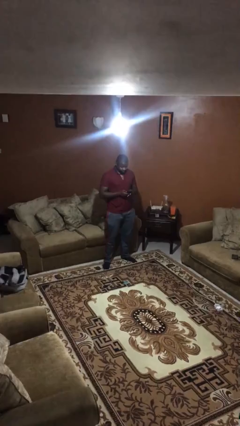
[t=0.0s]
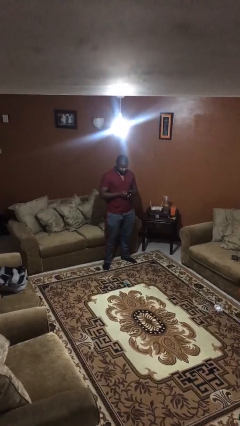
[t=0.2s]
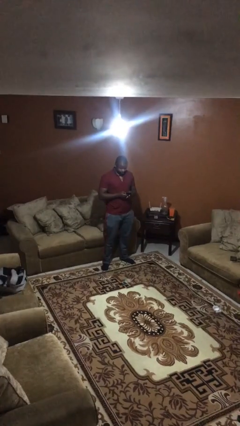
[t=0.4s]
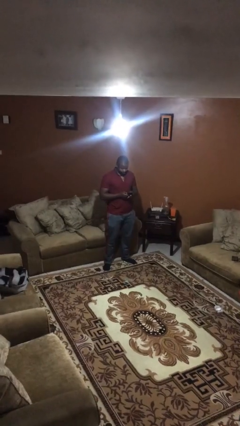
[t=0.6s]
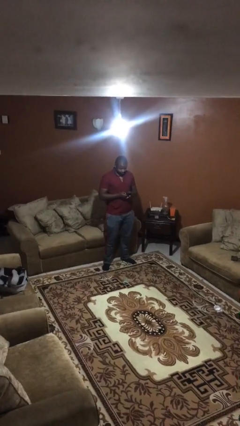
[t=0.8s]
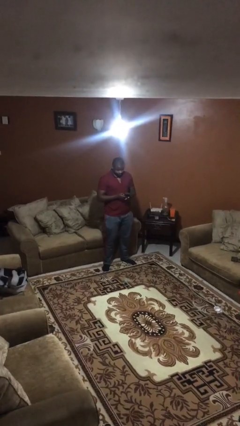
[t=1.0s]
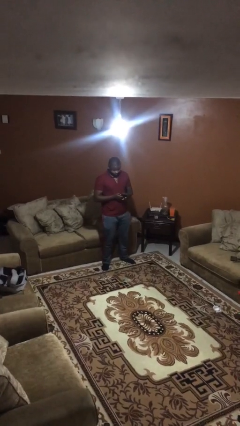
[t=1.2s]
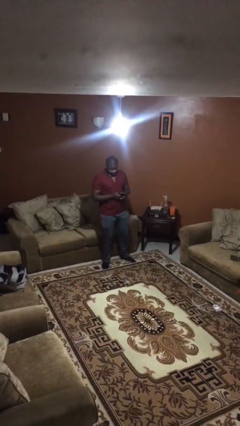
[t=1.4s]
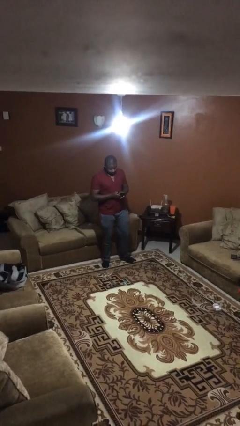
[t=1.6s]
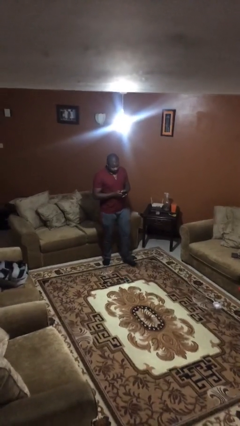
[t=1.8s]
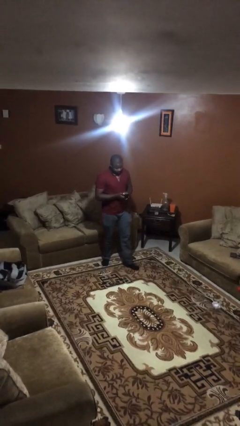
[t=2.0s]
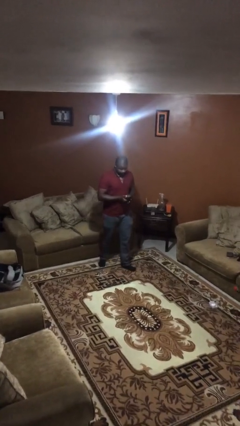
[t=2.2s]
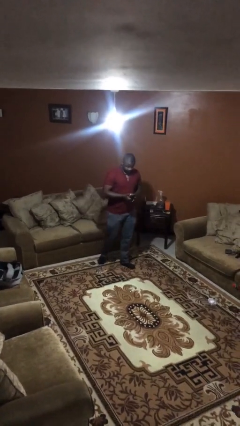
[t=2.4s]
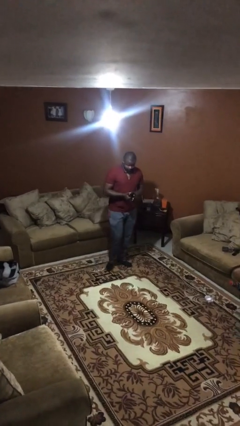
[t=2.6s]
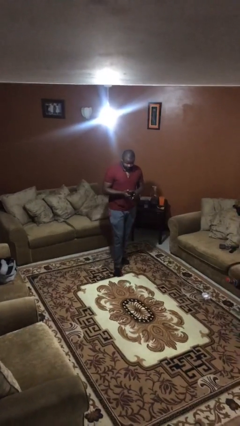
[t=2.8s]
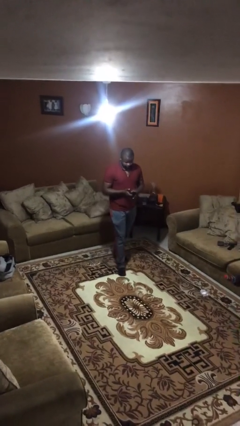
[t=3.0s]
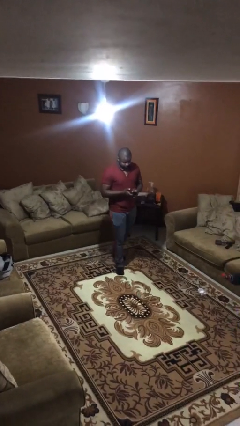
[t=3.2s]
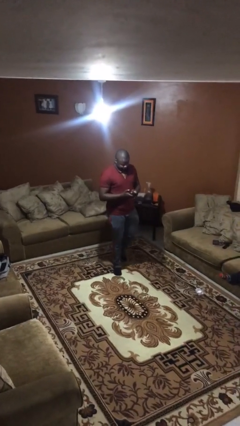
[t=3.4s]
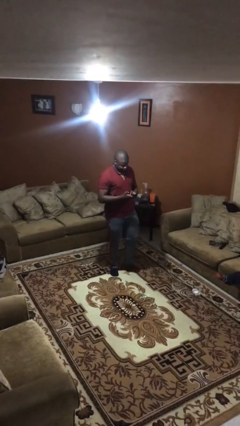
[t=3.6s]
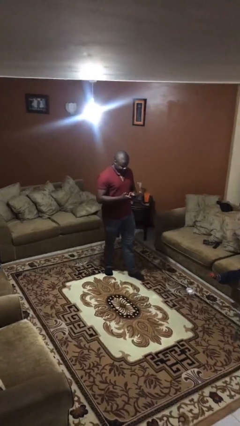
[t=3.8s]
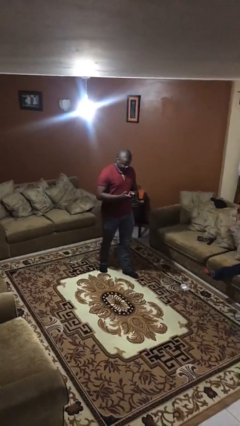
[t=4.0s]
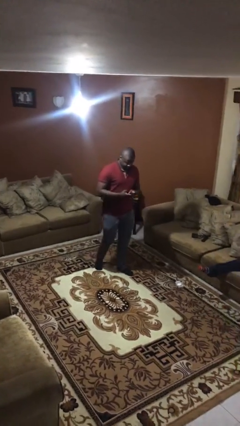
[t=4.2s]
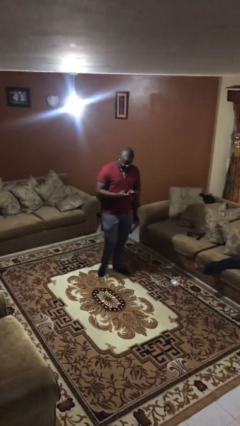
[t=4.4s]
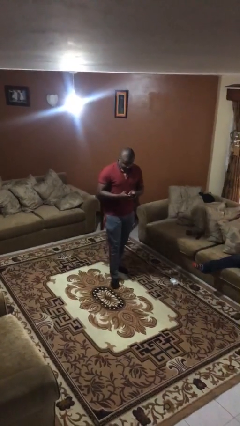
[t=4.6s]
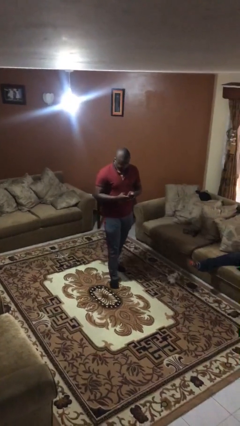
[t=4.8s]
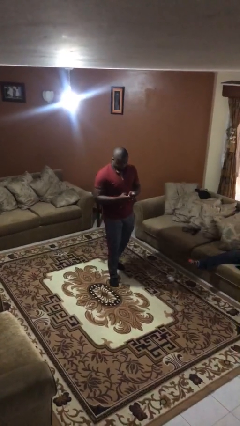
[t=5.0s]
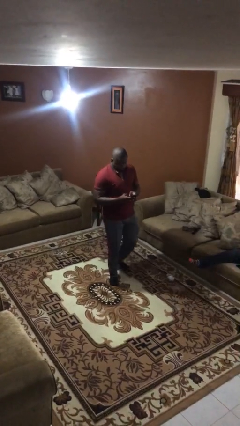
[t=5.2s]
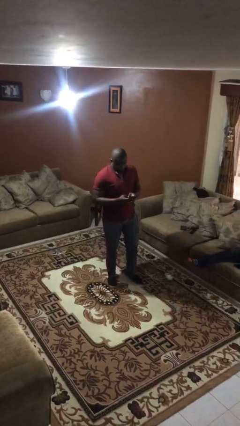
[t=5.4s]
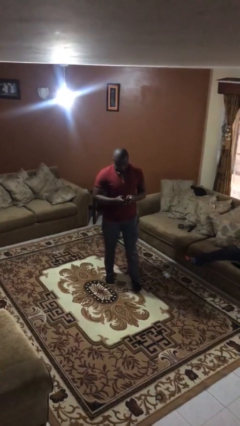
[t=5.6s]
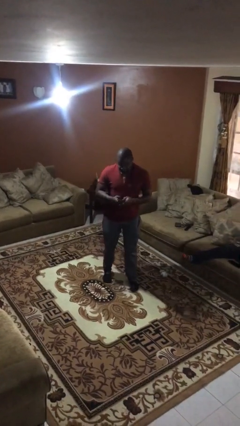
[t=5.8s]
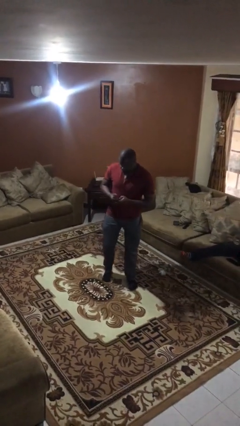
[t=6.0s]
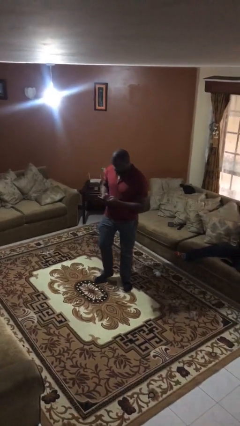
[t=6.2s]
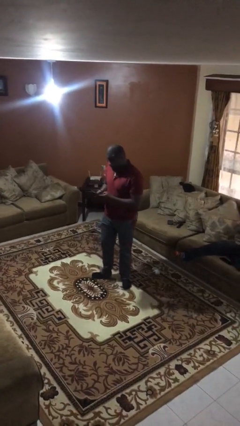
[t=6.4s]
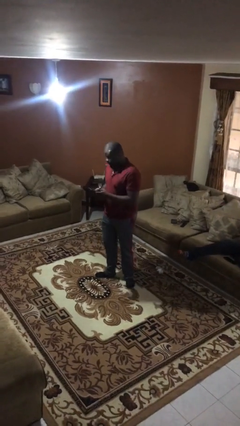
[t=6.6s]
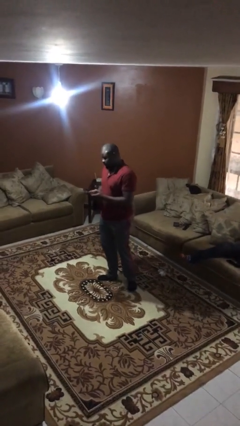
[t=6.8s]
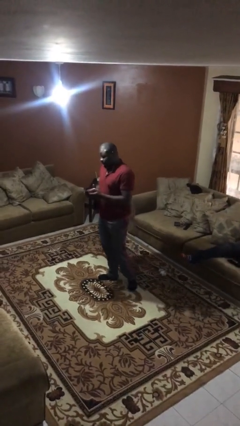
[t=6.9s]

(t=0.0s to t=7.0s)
person texts on phone

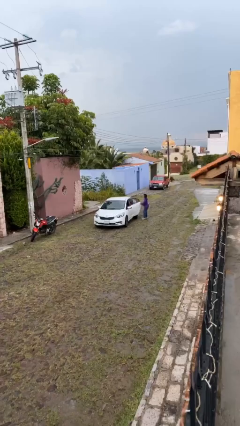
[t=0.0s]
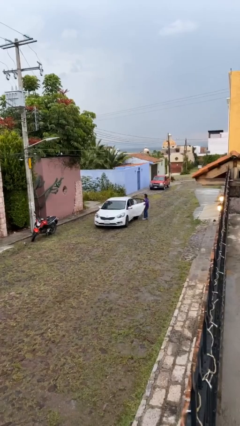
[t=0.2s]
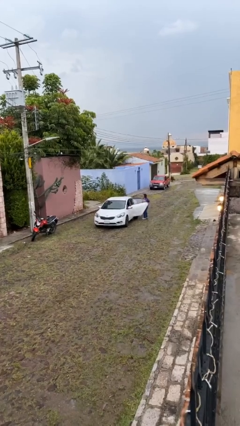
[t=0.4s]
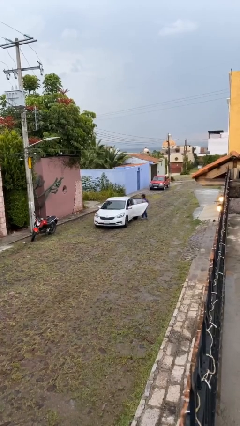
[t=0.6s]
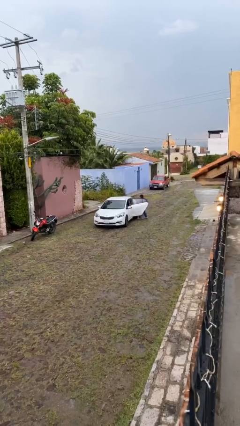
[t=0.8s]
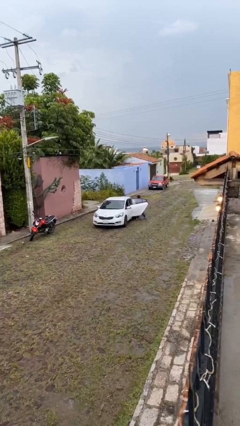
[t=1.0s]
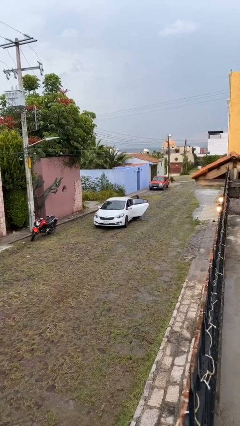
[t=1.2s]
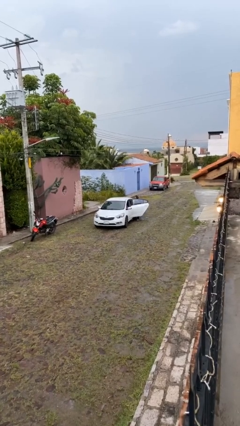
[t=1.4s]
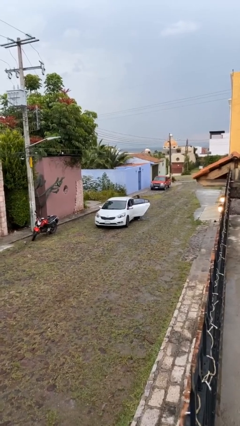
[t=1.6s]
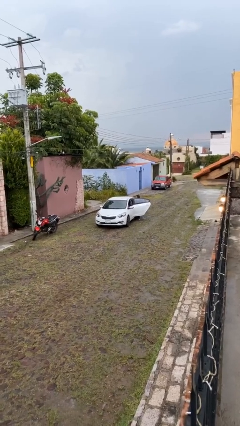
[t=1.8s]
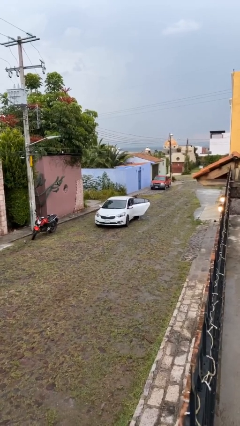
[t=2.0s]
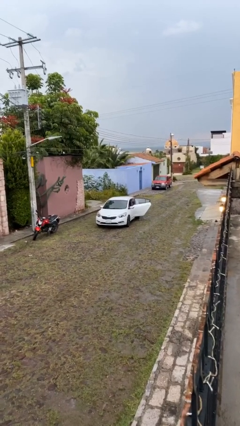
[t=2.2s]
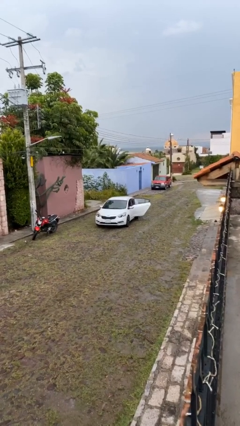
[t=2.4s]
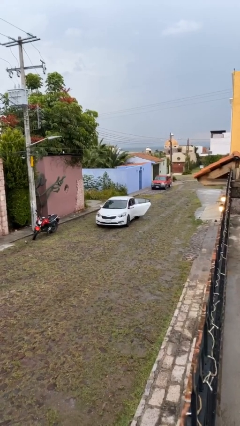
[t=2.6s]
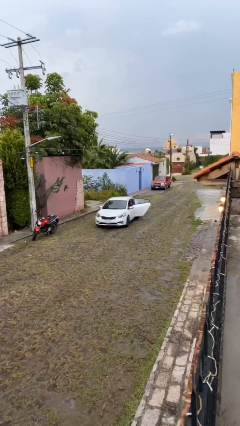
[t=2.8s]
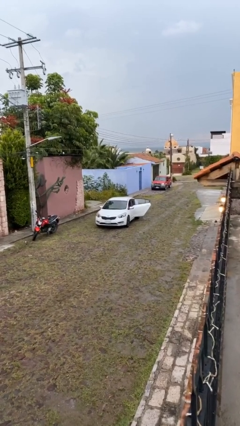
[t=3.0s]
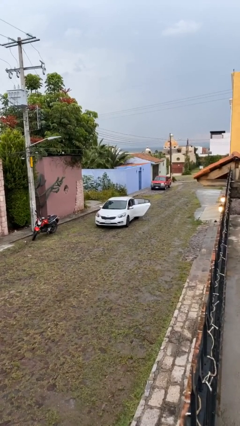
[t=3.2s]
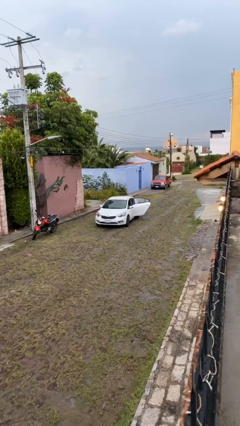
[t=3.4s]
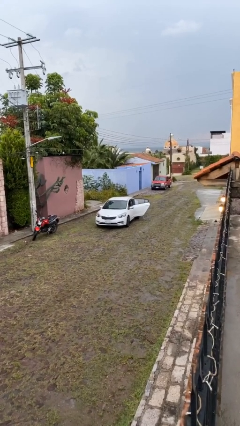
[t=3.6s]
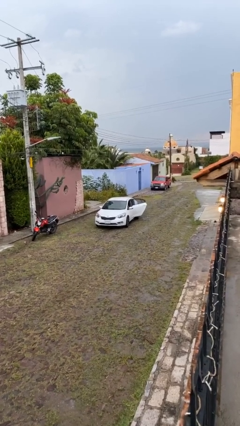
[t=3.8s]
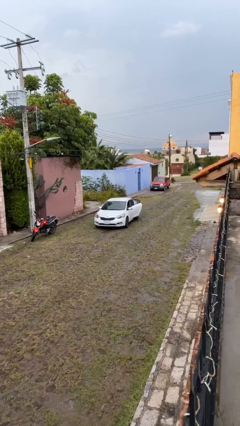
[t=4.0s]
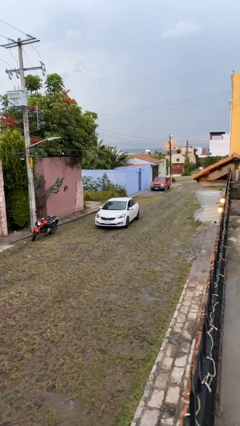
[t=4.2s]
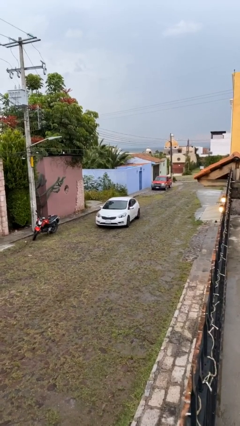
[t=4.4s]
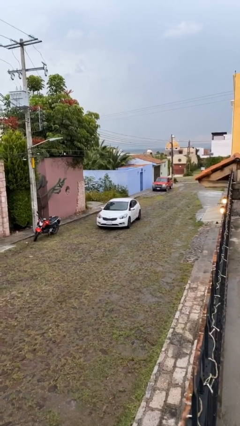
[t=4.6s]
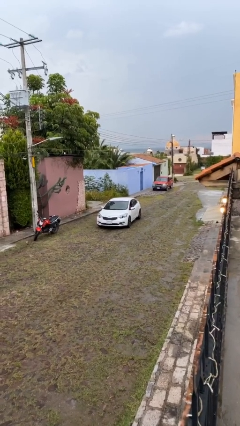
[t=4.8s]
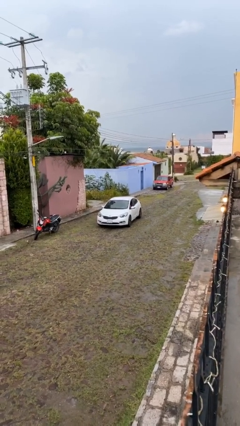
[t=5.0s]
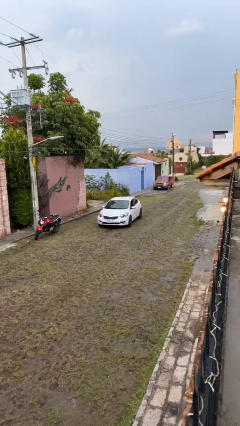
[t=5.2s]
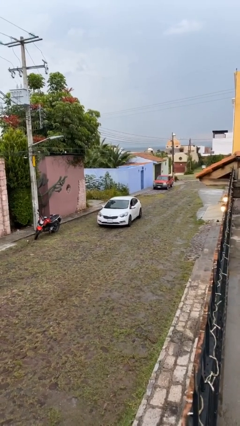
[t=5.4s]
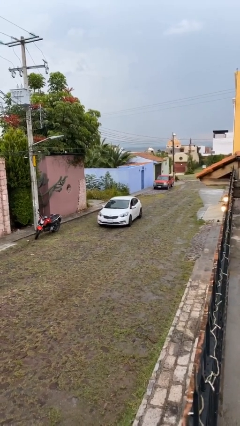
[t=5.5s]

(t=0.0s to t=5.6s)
car picks up person

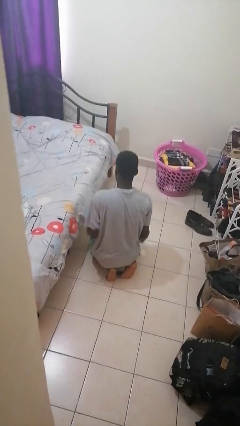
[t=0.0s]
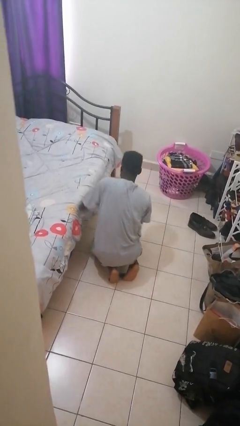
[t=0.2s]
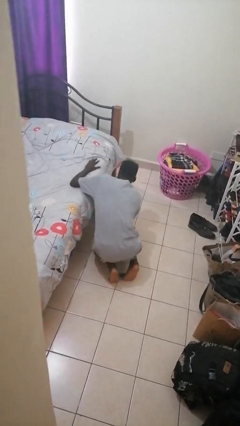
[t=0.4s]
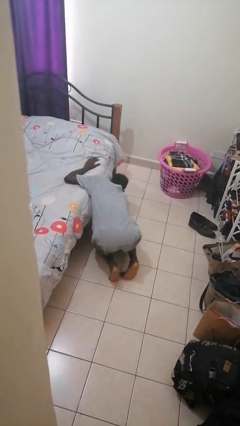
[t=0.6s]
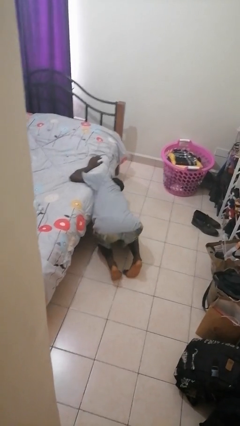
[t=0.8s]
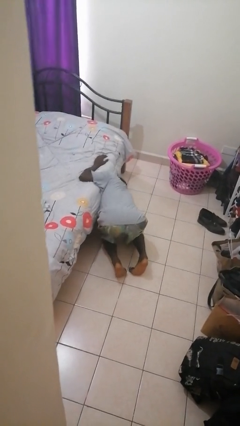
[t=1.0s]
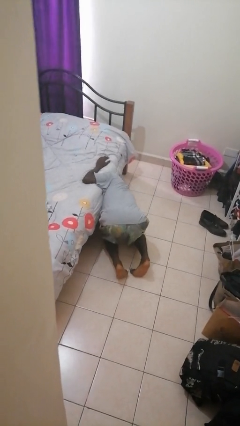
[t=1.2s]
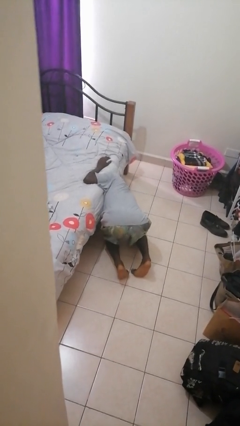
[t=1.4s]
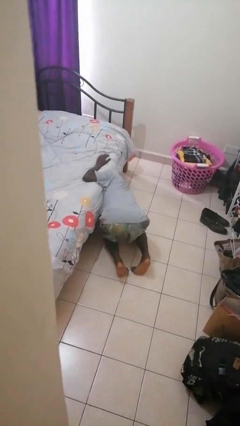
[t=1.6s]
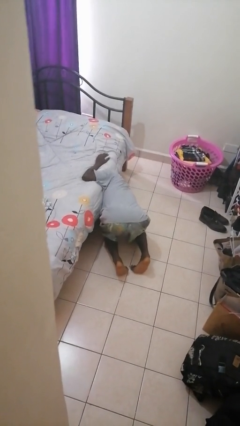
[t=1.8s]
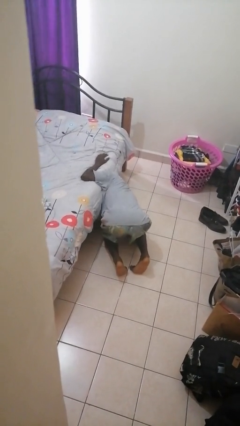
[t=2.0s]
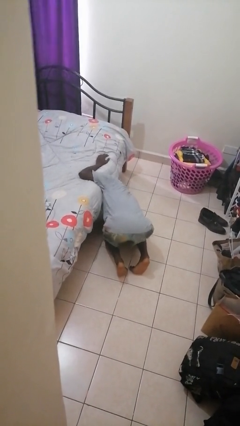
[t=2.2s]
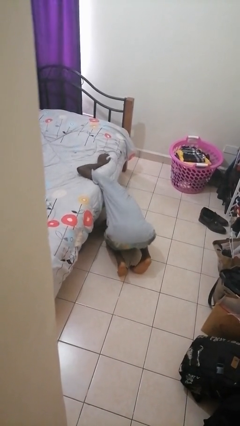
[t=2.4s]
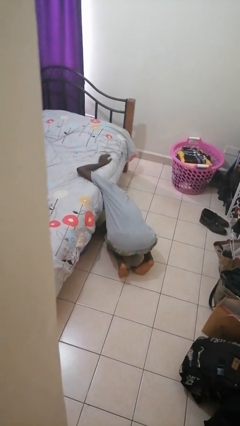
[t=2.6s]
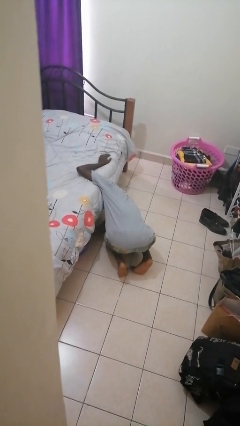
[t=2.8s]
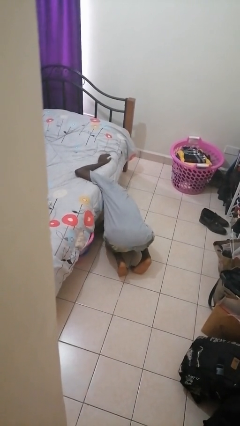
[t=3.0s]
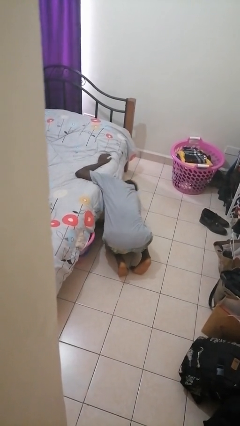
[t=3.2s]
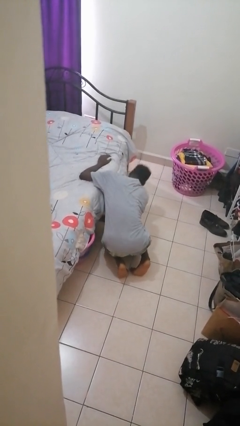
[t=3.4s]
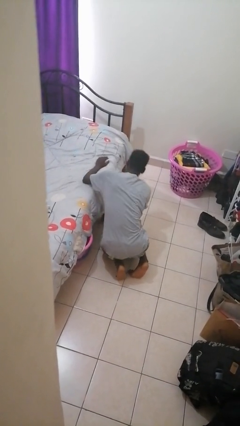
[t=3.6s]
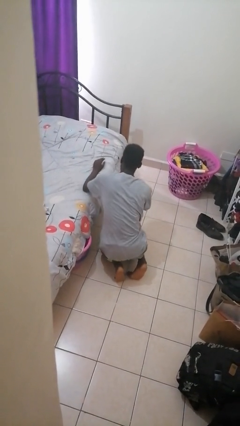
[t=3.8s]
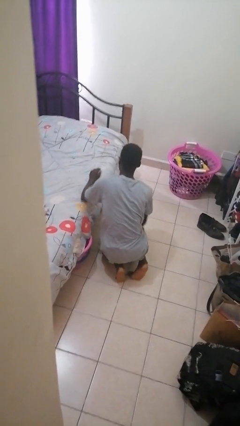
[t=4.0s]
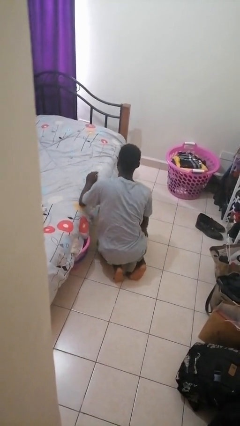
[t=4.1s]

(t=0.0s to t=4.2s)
person searches under bed

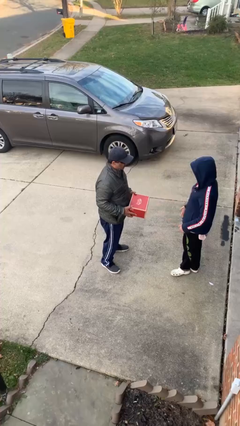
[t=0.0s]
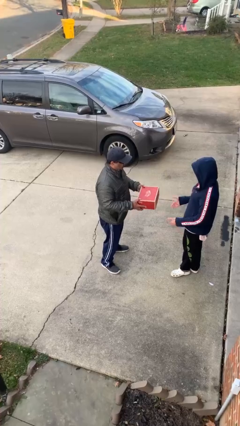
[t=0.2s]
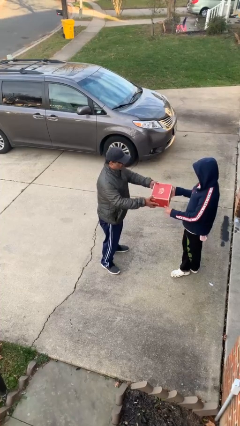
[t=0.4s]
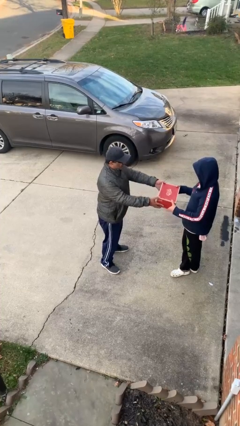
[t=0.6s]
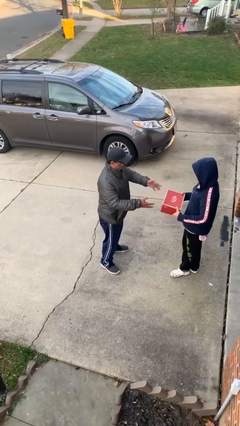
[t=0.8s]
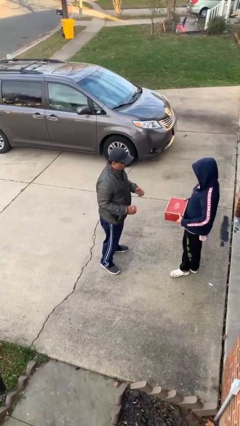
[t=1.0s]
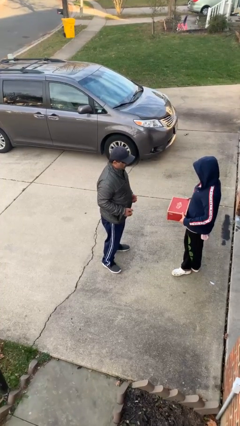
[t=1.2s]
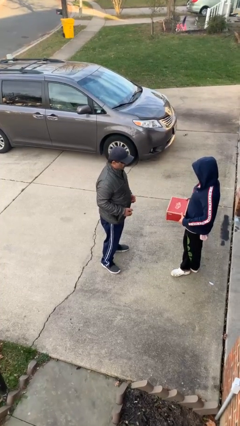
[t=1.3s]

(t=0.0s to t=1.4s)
person transfers object to person
